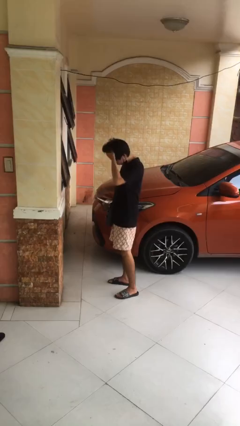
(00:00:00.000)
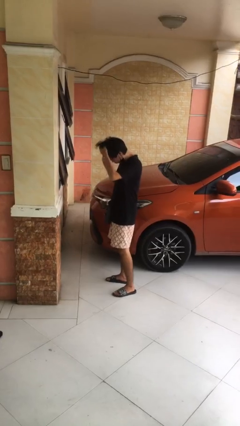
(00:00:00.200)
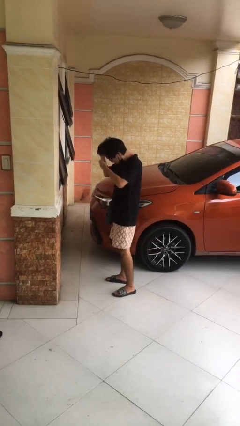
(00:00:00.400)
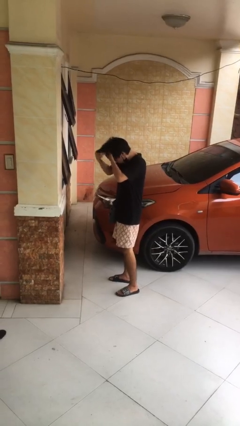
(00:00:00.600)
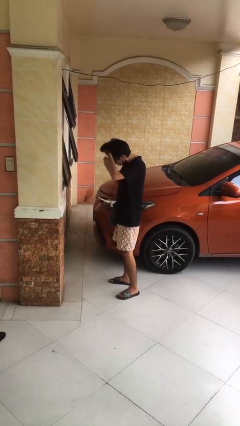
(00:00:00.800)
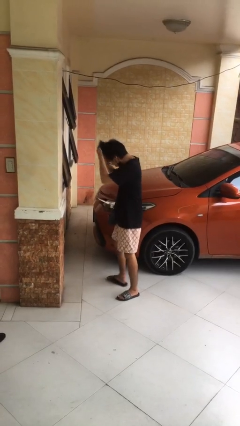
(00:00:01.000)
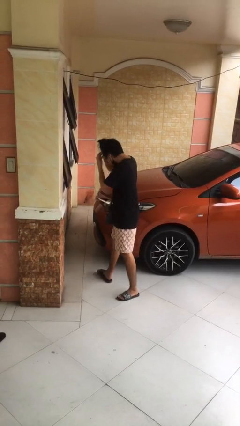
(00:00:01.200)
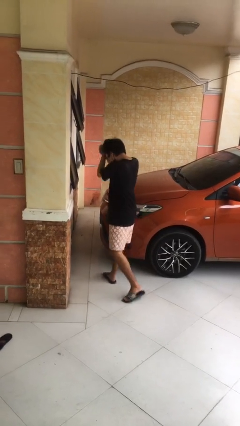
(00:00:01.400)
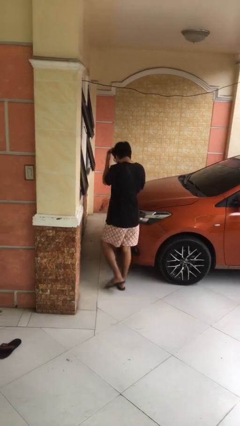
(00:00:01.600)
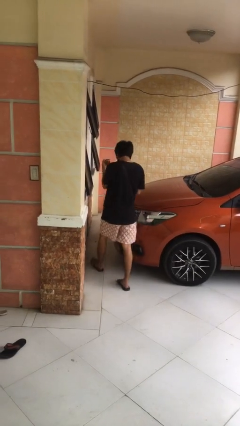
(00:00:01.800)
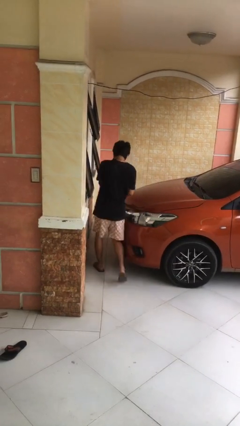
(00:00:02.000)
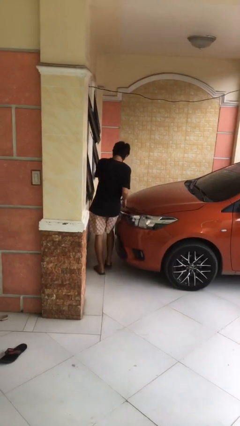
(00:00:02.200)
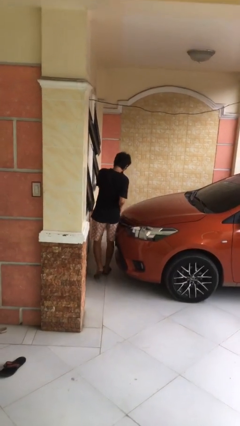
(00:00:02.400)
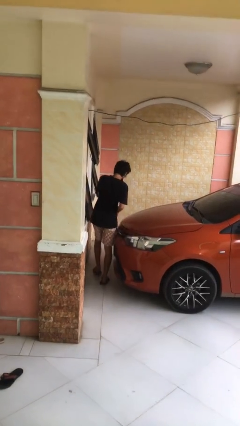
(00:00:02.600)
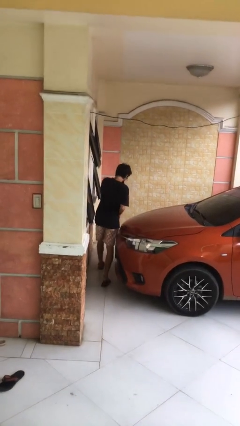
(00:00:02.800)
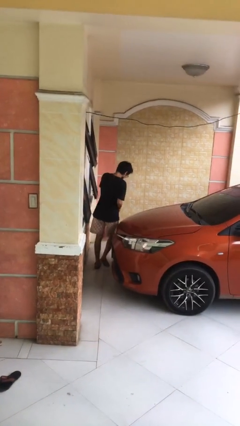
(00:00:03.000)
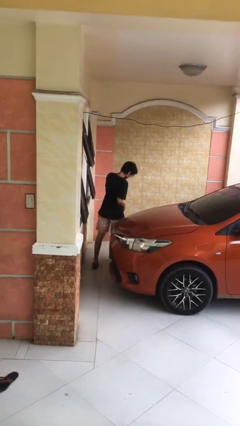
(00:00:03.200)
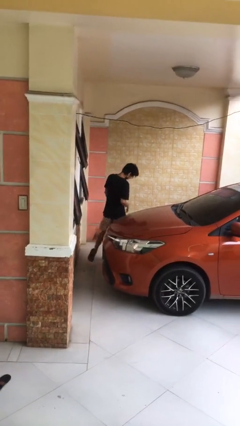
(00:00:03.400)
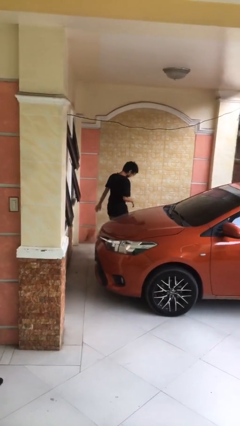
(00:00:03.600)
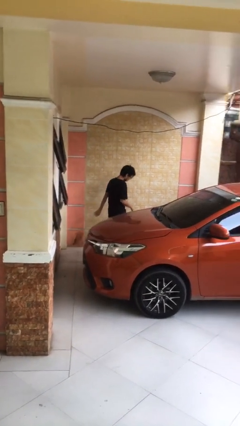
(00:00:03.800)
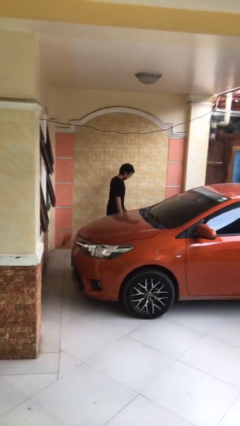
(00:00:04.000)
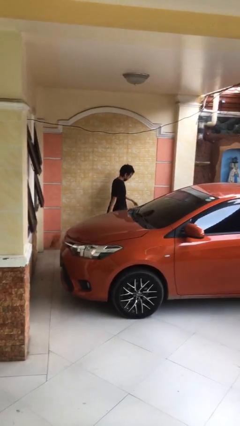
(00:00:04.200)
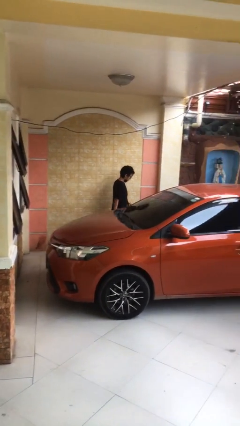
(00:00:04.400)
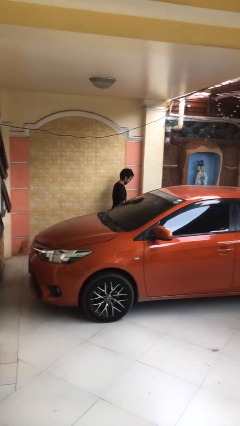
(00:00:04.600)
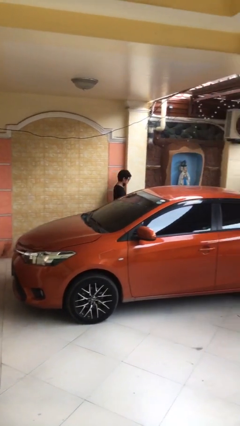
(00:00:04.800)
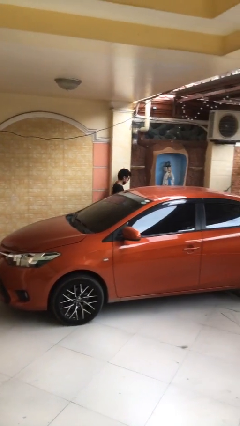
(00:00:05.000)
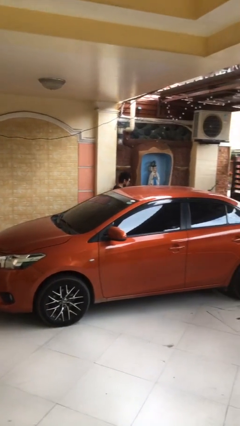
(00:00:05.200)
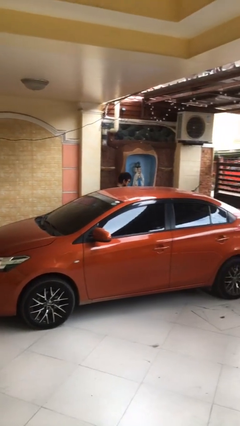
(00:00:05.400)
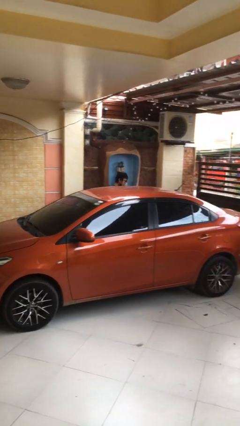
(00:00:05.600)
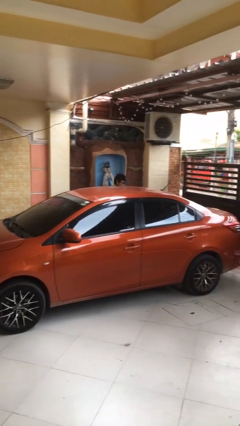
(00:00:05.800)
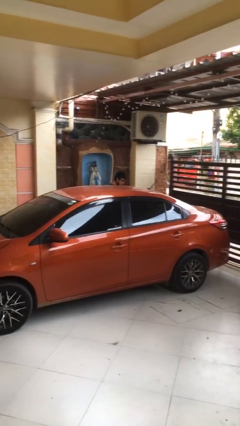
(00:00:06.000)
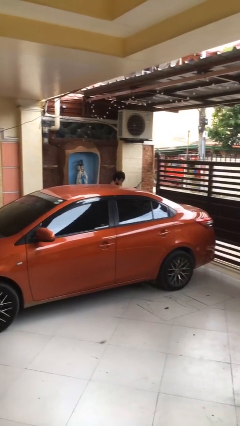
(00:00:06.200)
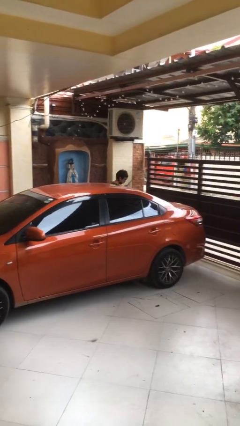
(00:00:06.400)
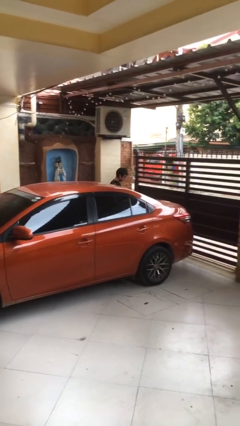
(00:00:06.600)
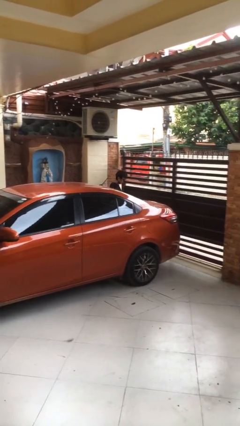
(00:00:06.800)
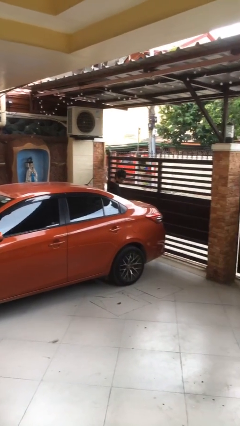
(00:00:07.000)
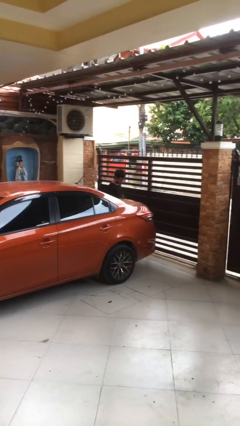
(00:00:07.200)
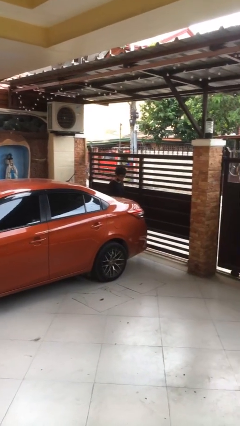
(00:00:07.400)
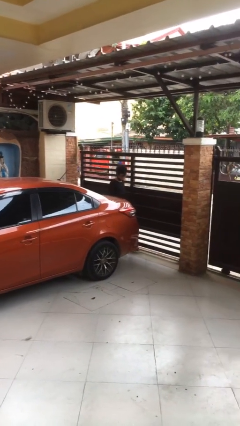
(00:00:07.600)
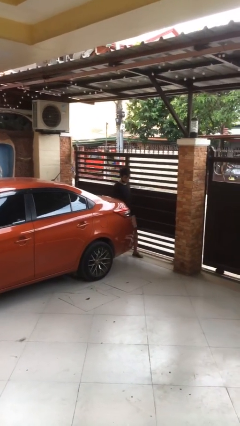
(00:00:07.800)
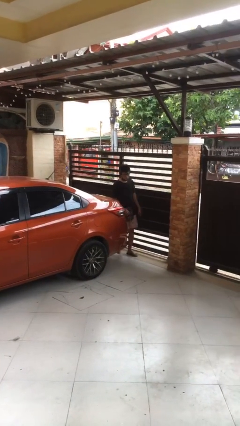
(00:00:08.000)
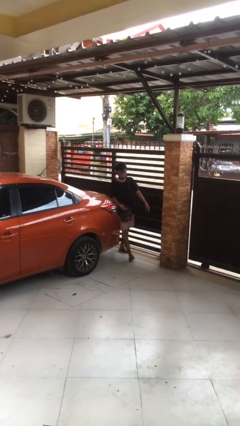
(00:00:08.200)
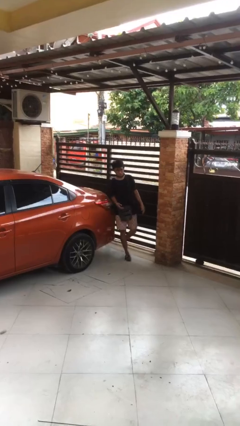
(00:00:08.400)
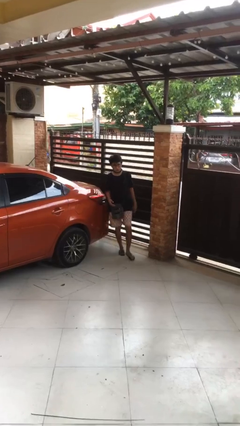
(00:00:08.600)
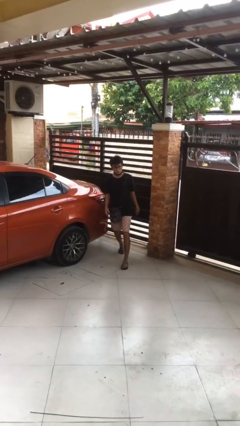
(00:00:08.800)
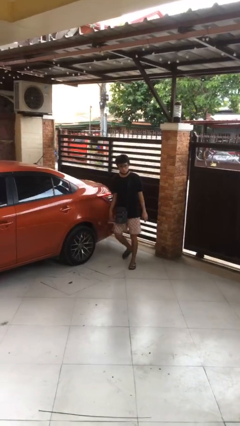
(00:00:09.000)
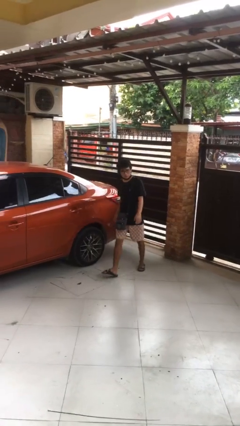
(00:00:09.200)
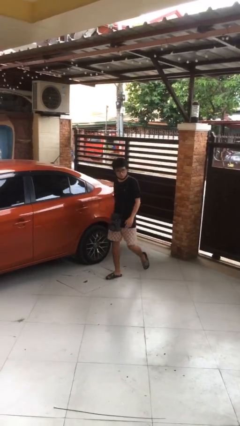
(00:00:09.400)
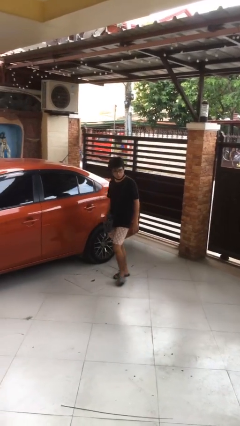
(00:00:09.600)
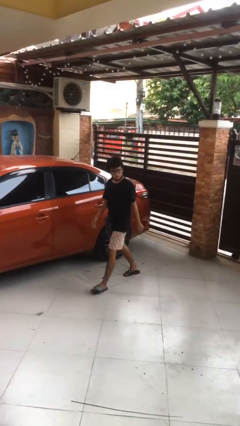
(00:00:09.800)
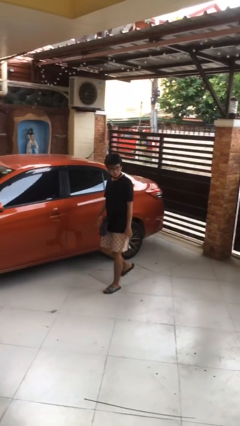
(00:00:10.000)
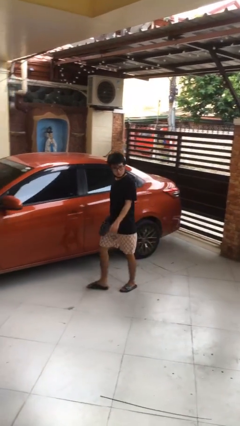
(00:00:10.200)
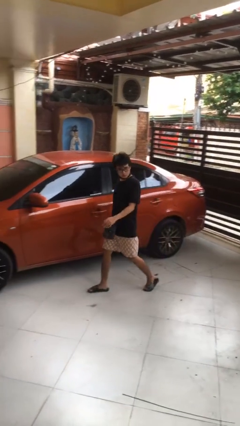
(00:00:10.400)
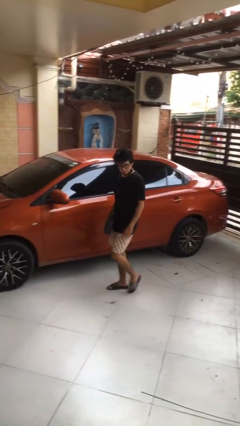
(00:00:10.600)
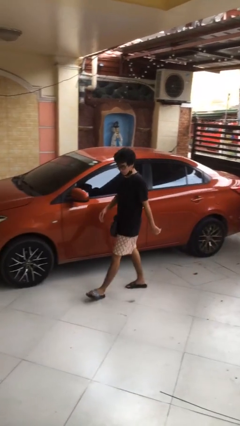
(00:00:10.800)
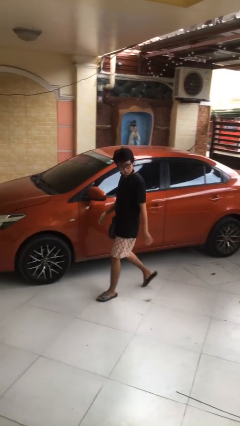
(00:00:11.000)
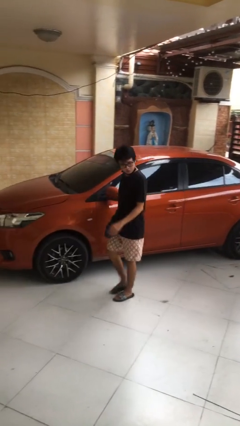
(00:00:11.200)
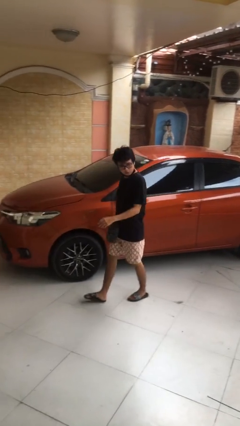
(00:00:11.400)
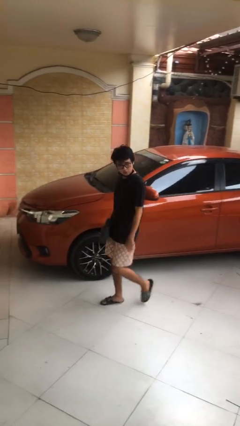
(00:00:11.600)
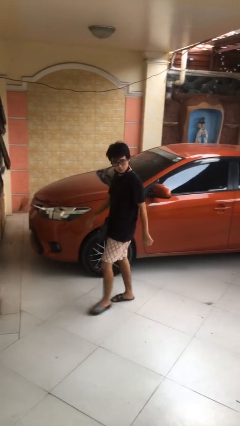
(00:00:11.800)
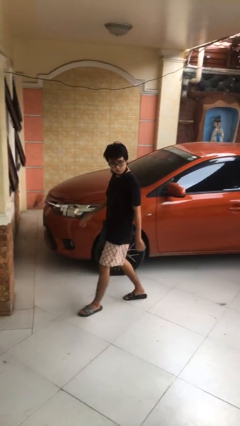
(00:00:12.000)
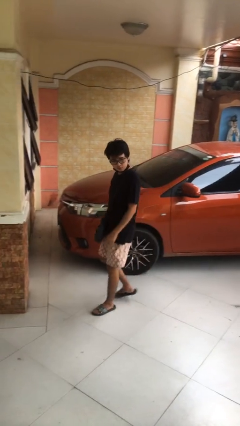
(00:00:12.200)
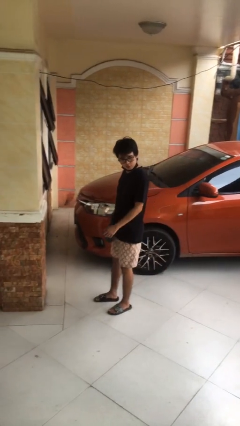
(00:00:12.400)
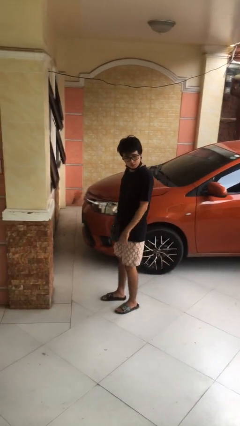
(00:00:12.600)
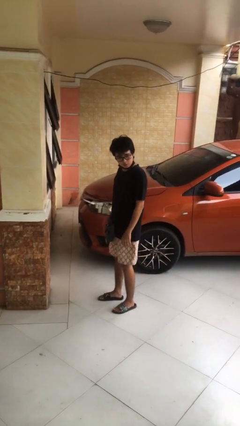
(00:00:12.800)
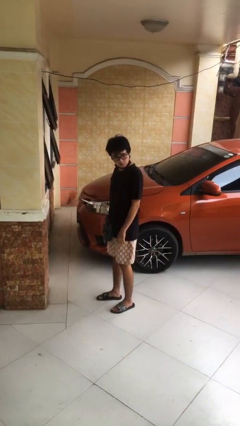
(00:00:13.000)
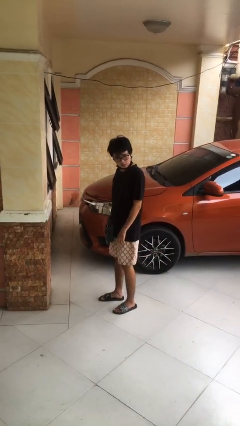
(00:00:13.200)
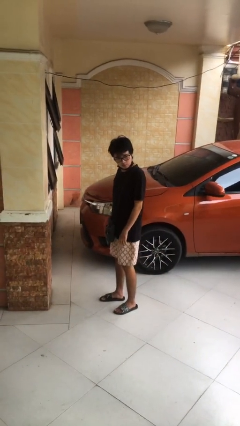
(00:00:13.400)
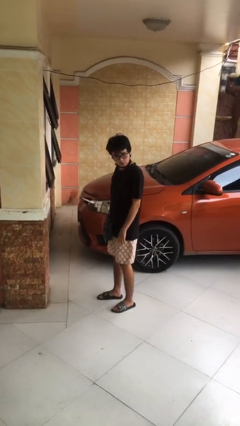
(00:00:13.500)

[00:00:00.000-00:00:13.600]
person walks around car

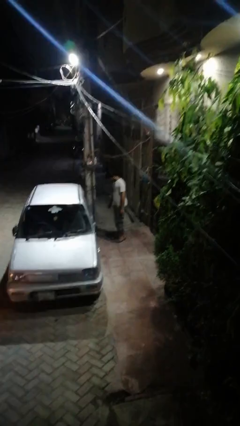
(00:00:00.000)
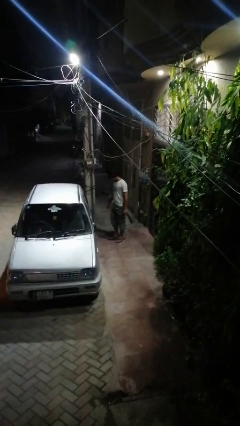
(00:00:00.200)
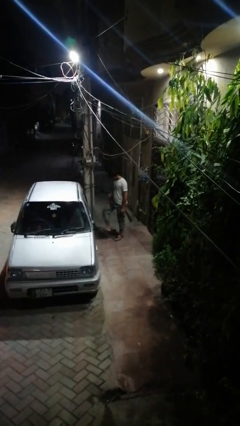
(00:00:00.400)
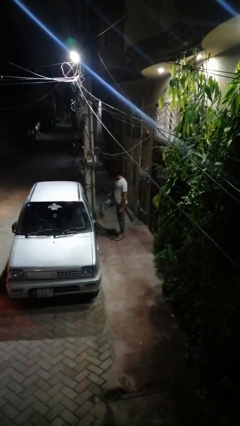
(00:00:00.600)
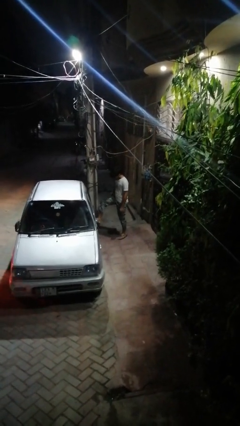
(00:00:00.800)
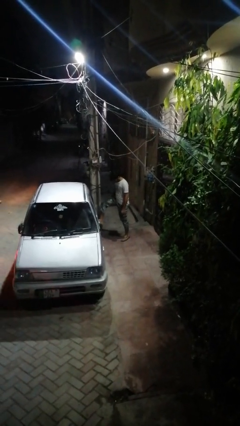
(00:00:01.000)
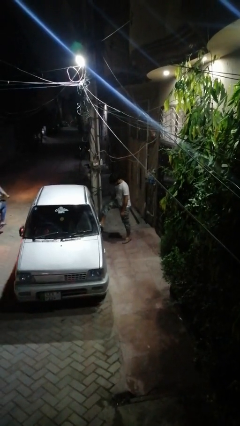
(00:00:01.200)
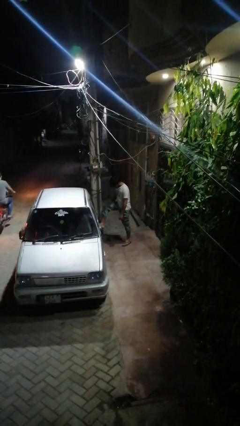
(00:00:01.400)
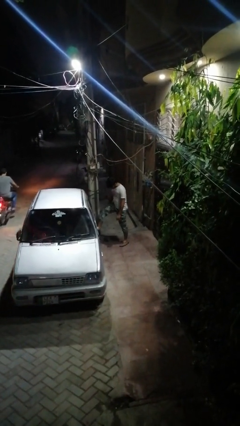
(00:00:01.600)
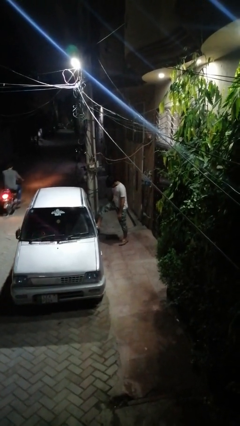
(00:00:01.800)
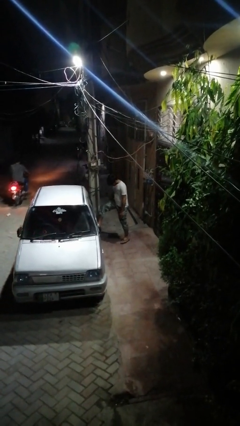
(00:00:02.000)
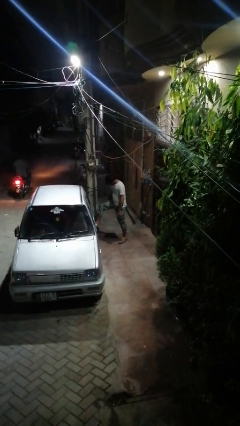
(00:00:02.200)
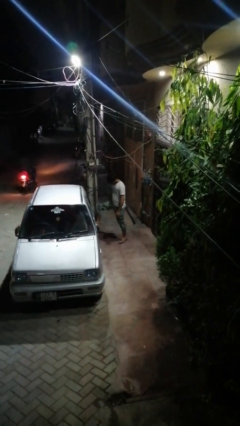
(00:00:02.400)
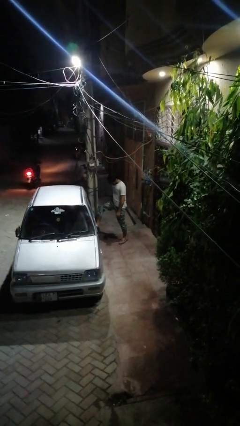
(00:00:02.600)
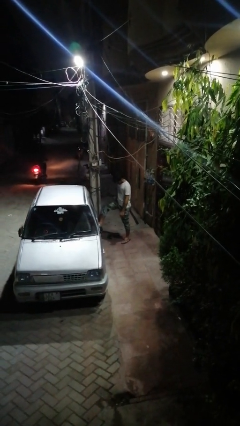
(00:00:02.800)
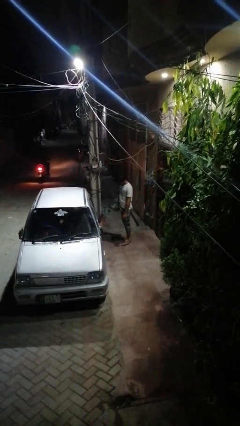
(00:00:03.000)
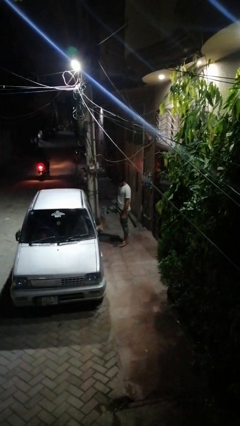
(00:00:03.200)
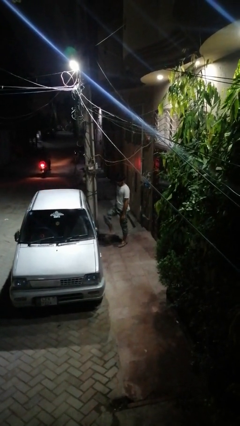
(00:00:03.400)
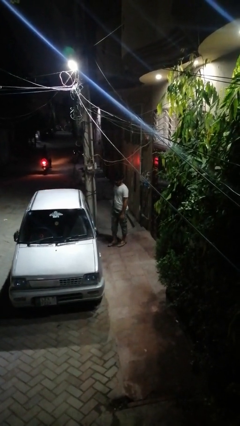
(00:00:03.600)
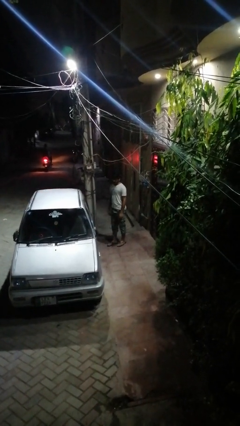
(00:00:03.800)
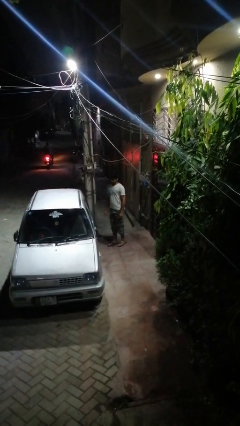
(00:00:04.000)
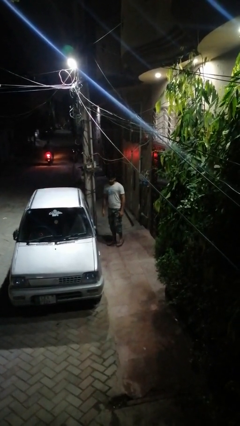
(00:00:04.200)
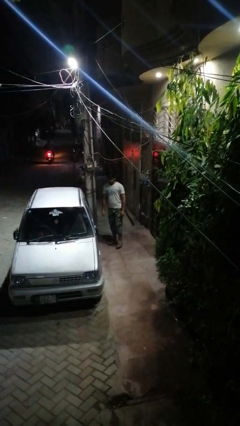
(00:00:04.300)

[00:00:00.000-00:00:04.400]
person kicks car tires
